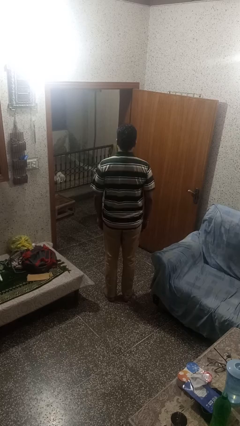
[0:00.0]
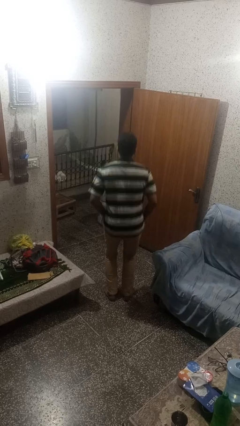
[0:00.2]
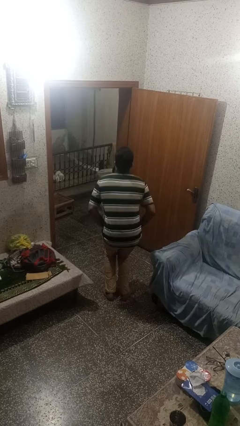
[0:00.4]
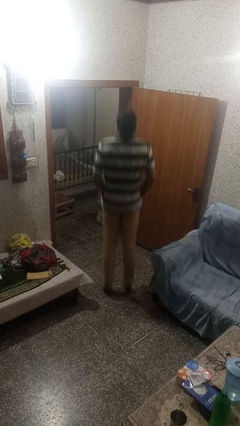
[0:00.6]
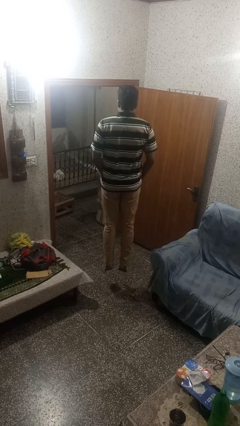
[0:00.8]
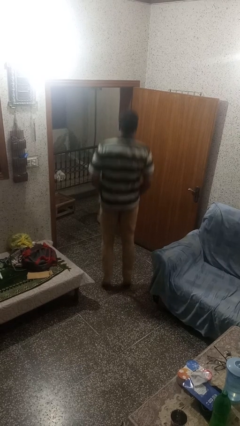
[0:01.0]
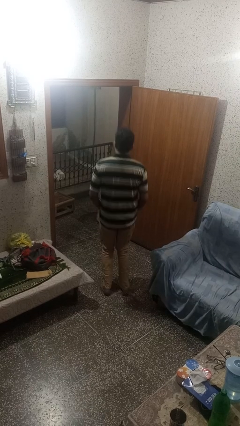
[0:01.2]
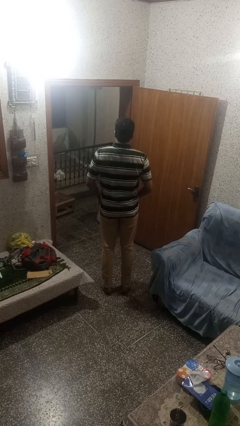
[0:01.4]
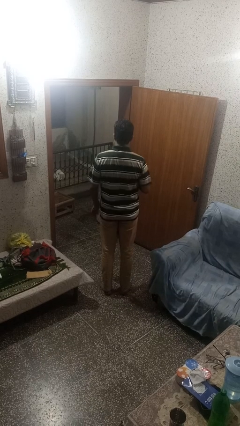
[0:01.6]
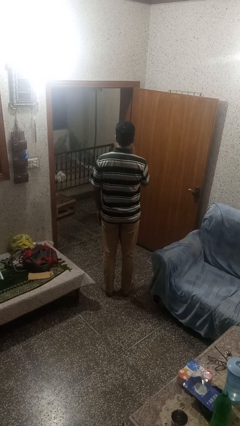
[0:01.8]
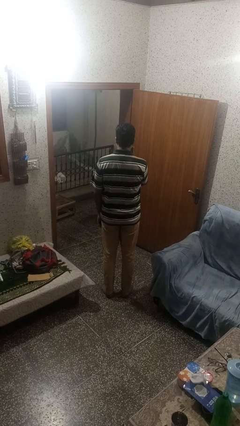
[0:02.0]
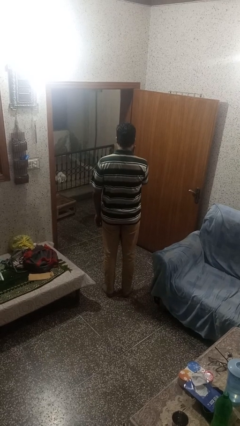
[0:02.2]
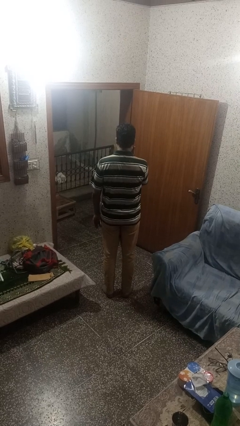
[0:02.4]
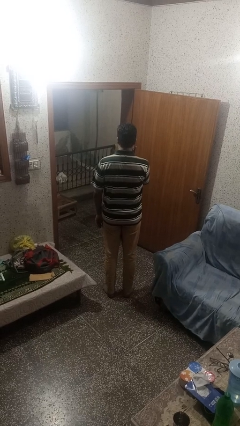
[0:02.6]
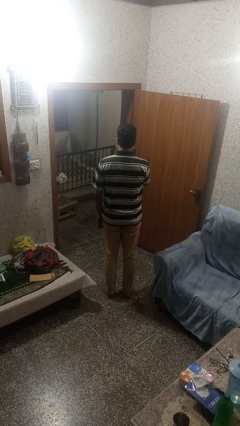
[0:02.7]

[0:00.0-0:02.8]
person jumps

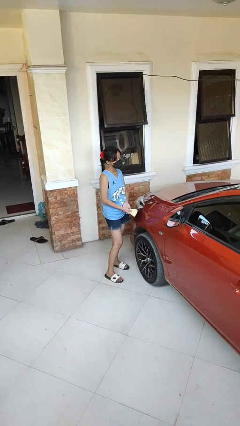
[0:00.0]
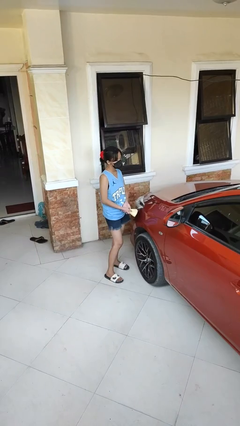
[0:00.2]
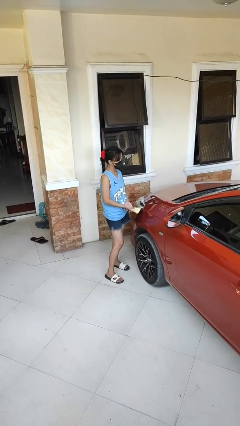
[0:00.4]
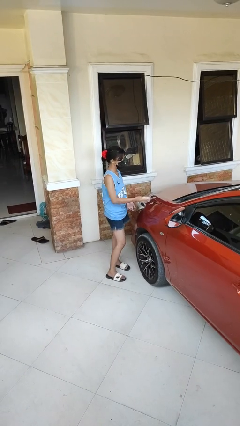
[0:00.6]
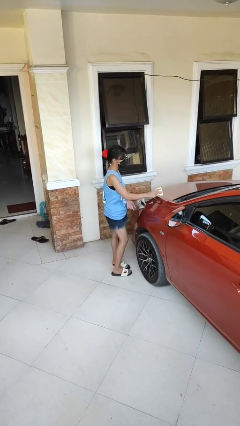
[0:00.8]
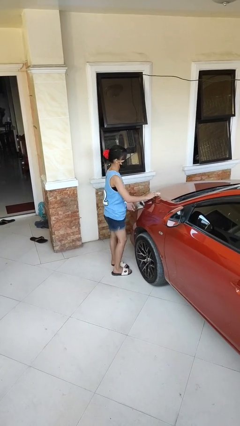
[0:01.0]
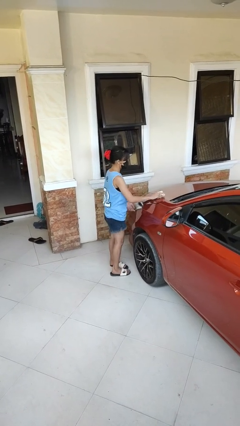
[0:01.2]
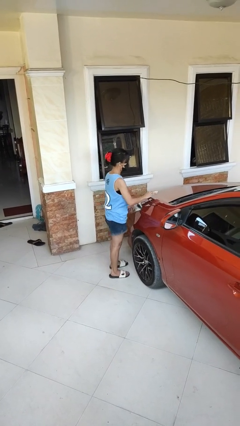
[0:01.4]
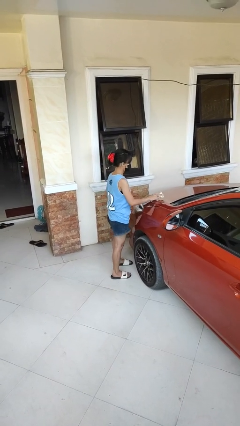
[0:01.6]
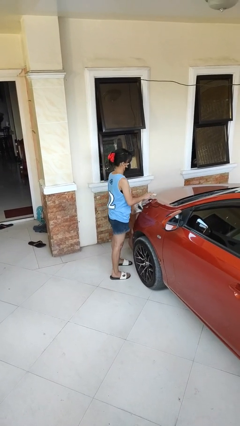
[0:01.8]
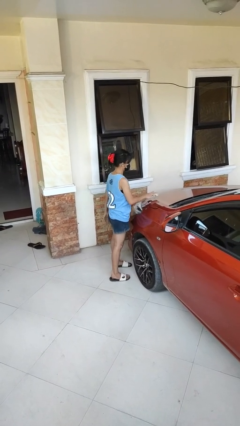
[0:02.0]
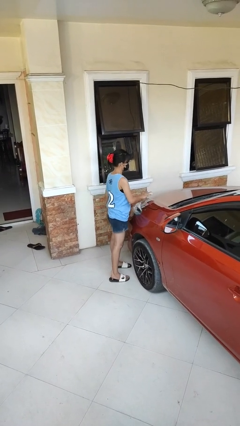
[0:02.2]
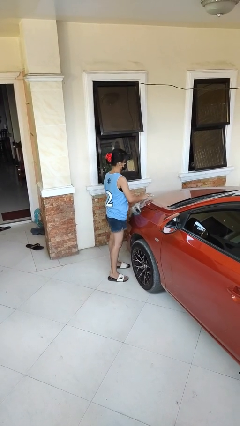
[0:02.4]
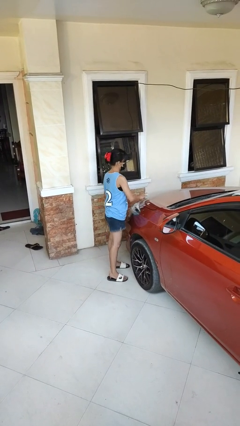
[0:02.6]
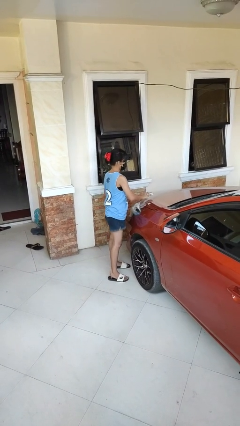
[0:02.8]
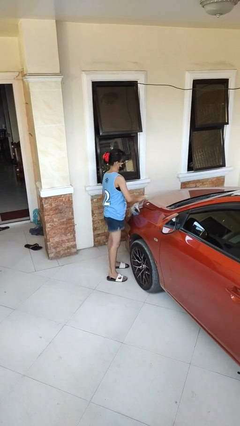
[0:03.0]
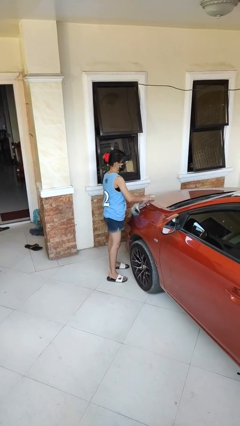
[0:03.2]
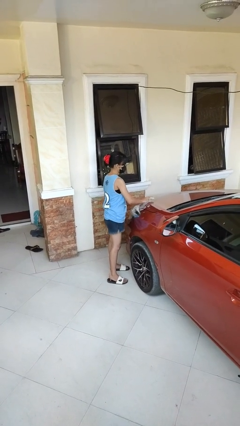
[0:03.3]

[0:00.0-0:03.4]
person polishes car with rag

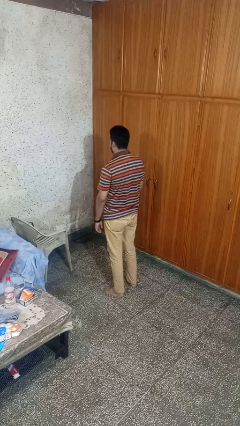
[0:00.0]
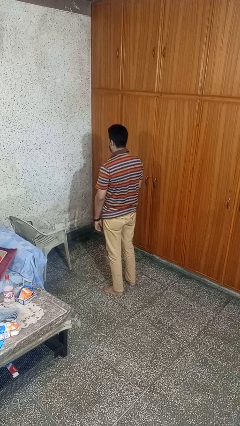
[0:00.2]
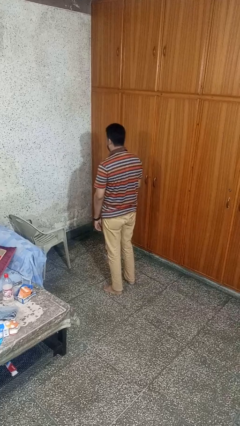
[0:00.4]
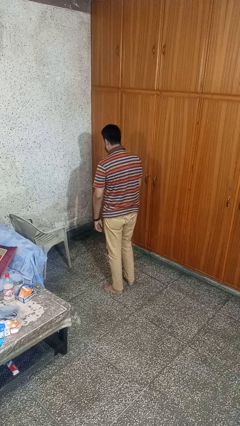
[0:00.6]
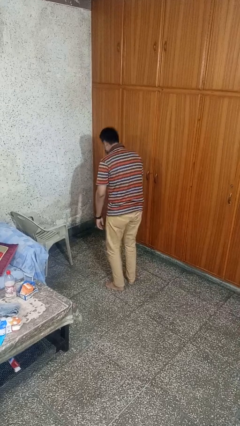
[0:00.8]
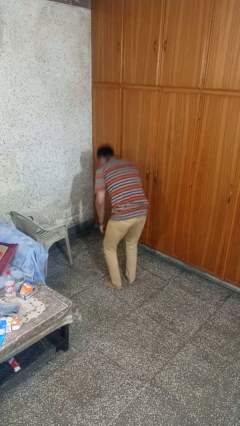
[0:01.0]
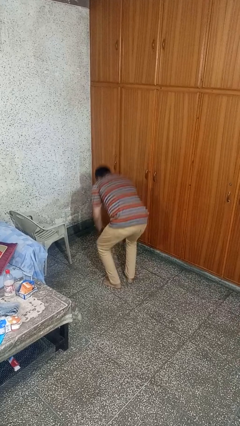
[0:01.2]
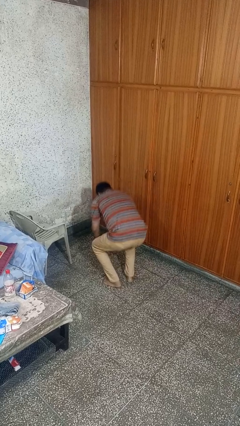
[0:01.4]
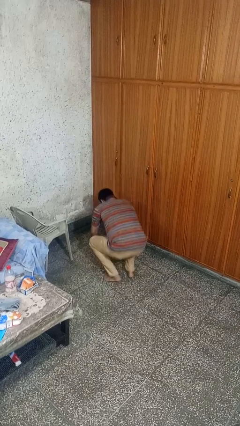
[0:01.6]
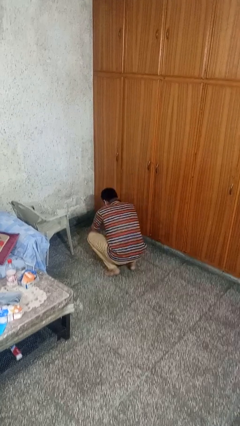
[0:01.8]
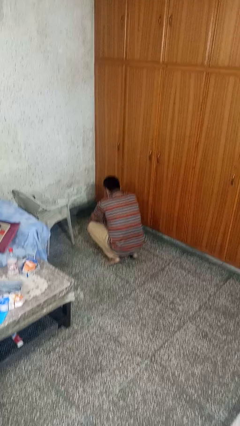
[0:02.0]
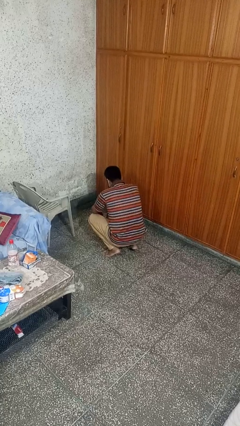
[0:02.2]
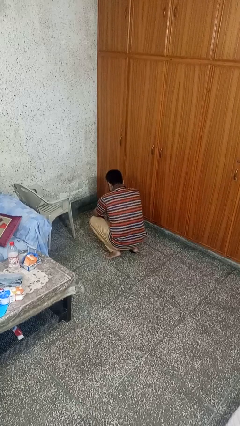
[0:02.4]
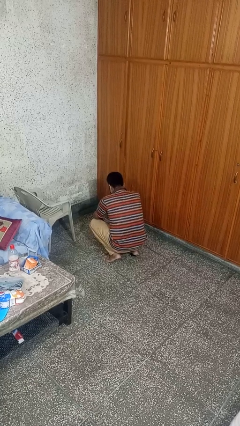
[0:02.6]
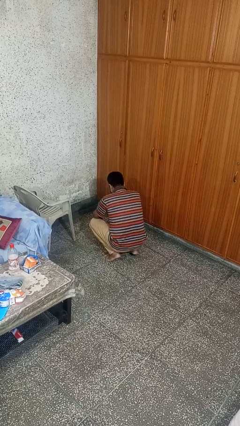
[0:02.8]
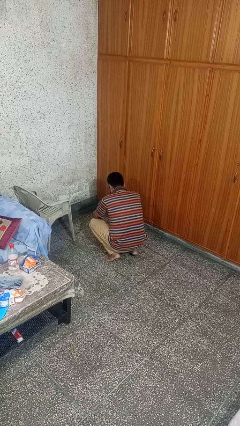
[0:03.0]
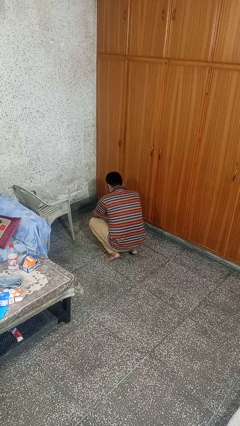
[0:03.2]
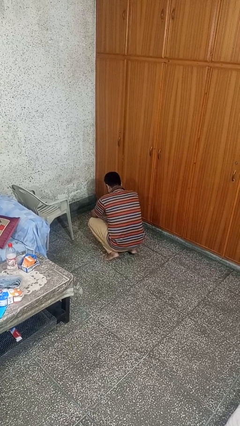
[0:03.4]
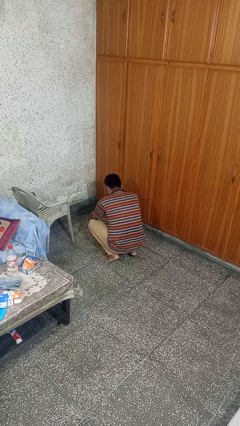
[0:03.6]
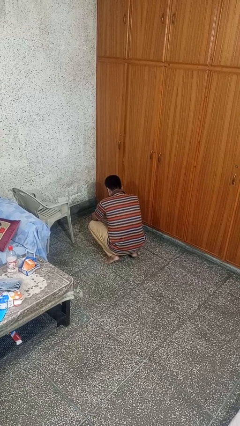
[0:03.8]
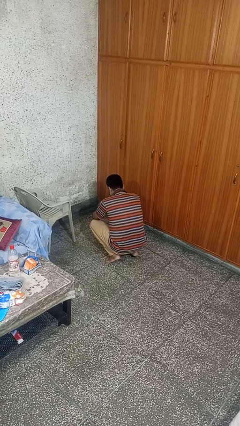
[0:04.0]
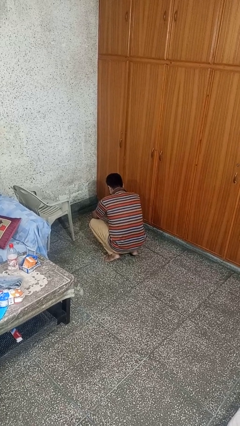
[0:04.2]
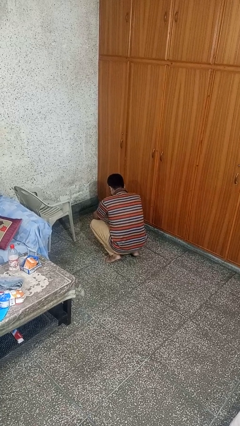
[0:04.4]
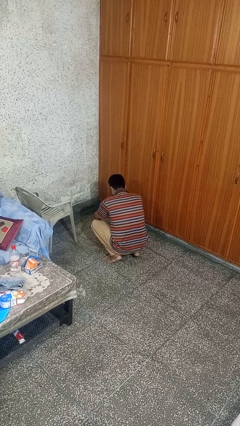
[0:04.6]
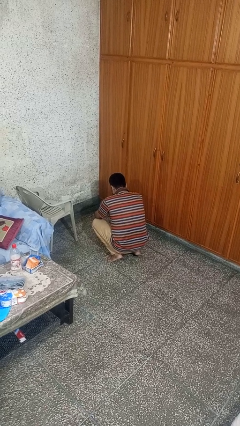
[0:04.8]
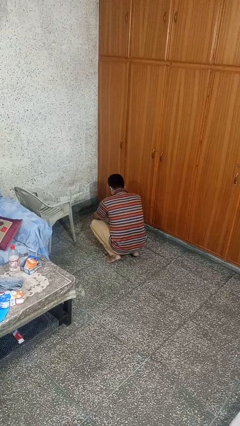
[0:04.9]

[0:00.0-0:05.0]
person squats

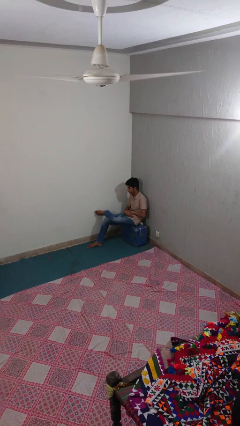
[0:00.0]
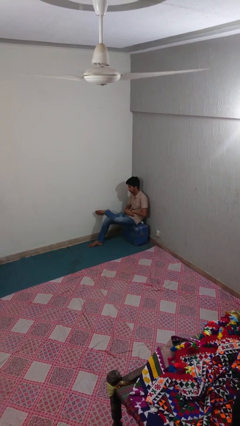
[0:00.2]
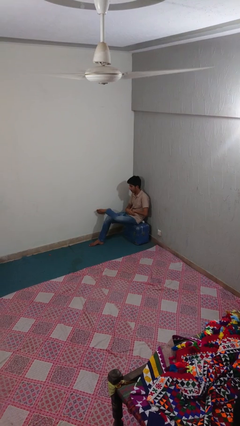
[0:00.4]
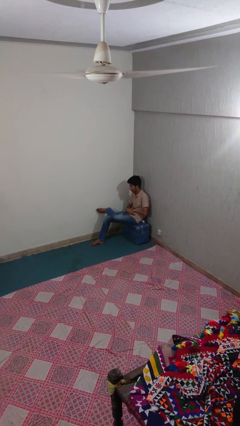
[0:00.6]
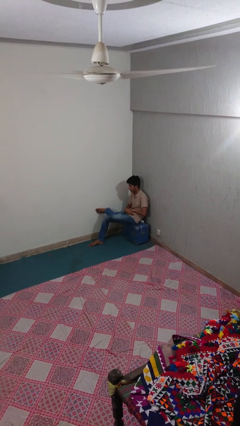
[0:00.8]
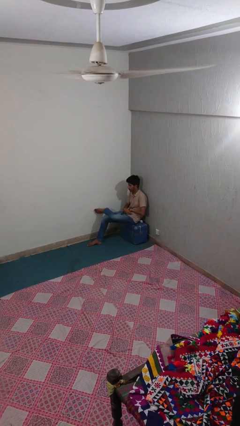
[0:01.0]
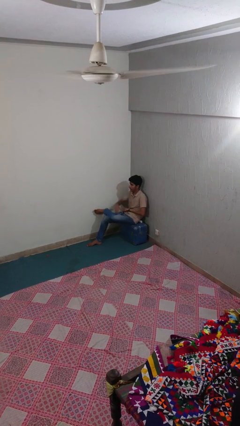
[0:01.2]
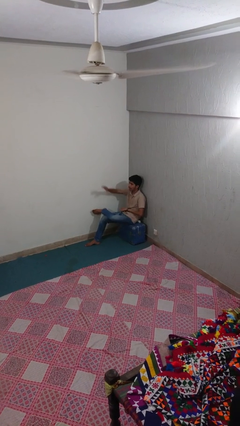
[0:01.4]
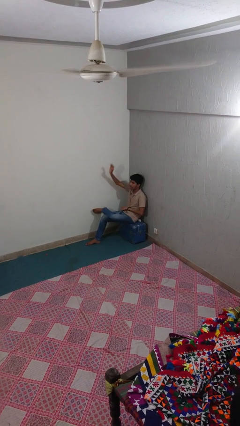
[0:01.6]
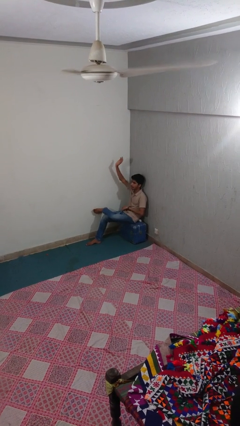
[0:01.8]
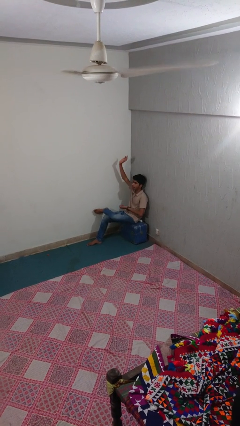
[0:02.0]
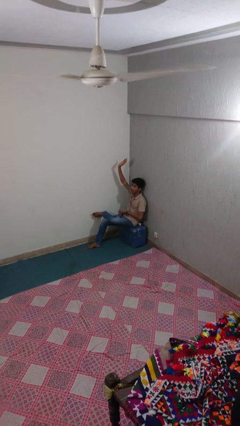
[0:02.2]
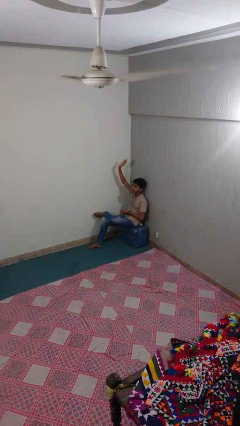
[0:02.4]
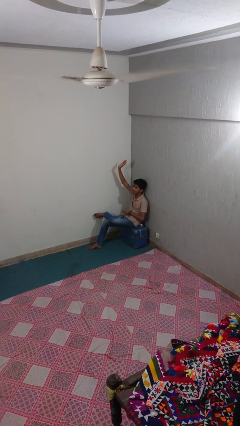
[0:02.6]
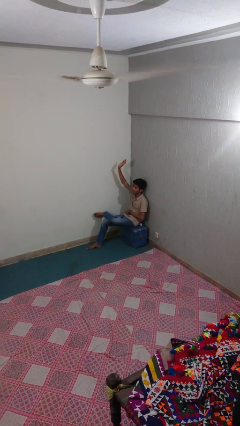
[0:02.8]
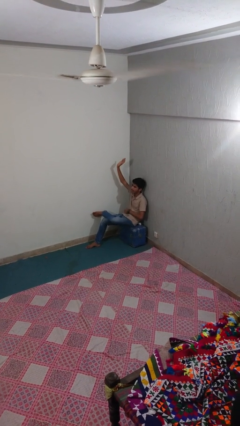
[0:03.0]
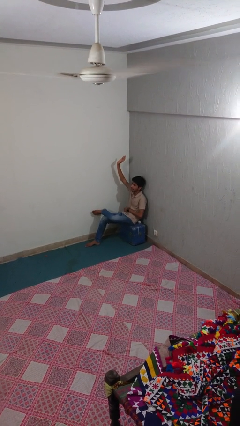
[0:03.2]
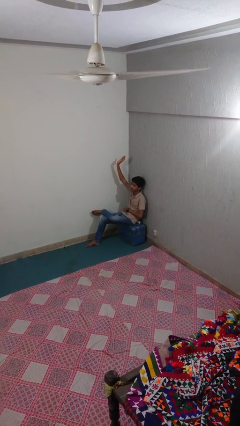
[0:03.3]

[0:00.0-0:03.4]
person gestures raise hand

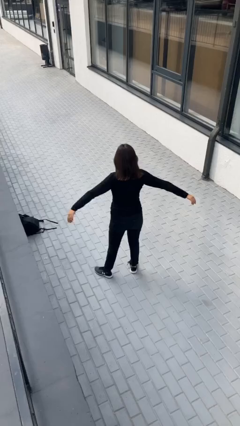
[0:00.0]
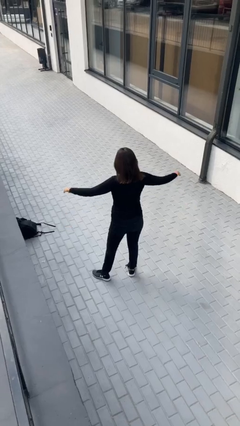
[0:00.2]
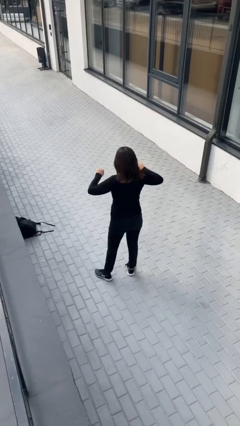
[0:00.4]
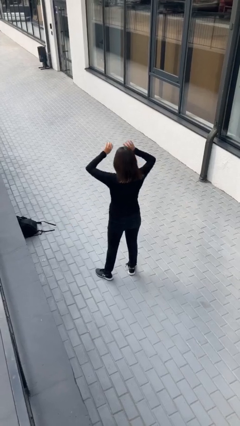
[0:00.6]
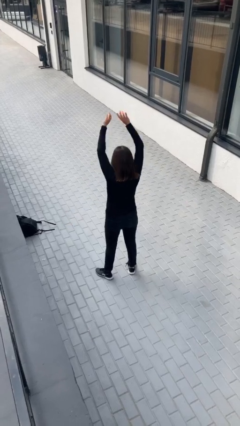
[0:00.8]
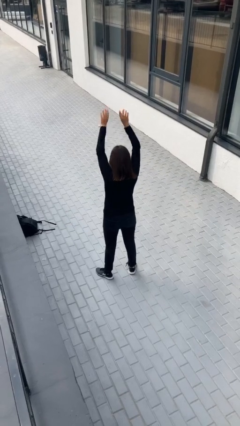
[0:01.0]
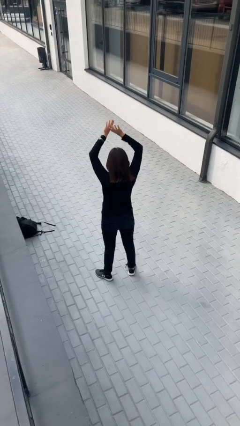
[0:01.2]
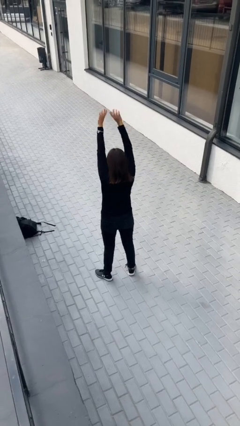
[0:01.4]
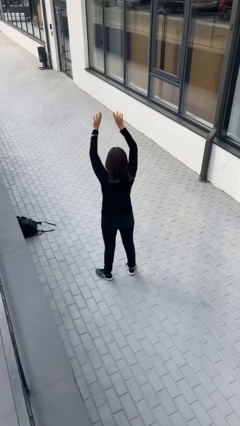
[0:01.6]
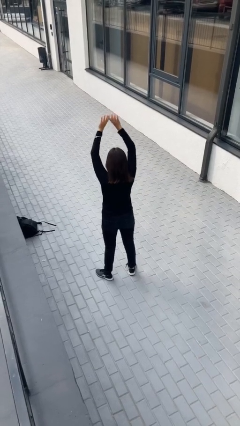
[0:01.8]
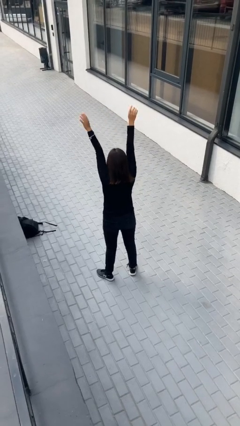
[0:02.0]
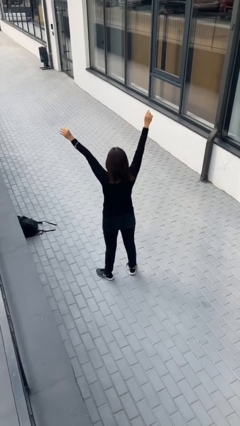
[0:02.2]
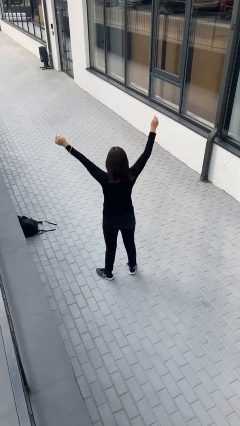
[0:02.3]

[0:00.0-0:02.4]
person stretches arms over head
